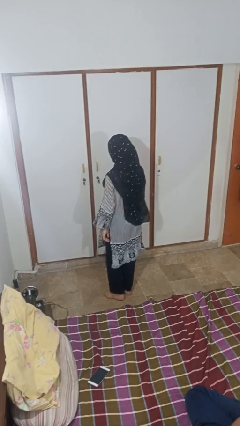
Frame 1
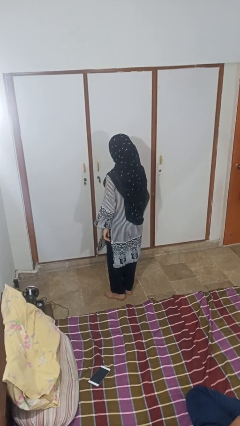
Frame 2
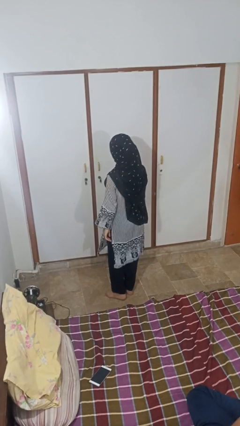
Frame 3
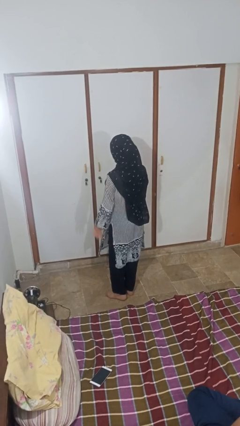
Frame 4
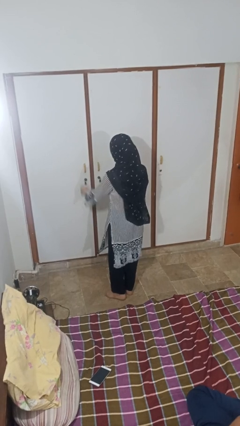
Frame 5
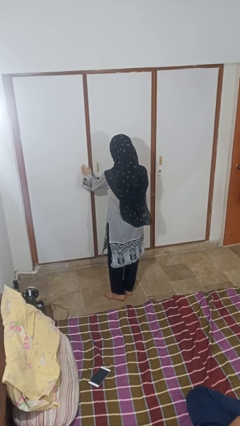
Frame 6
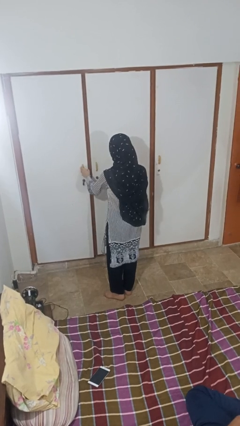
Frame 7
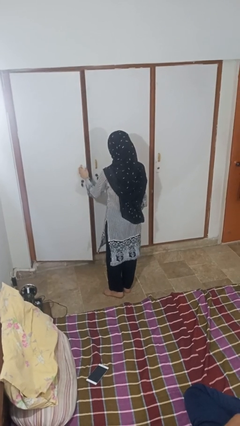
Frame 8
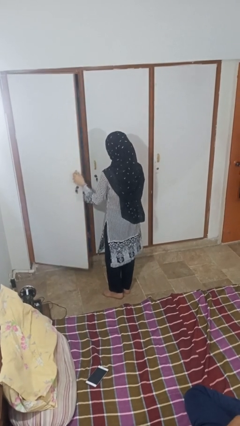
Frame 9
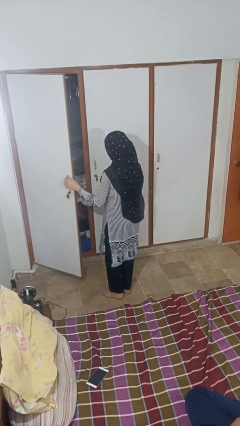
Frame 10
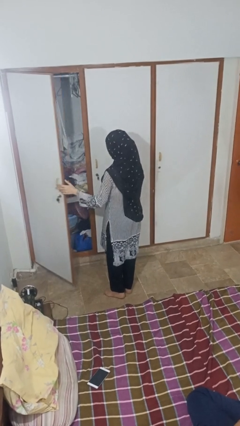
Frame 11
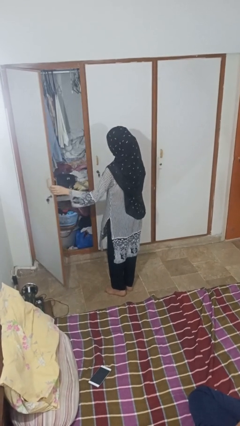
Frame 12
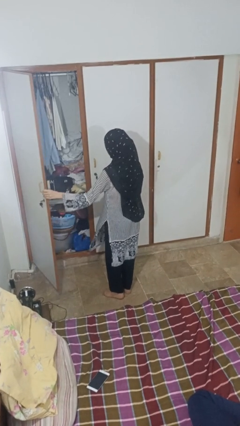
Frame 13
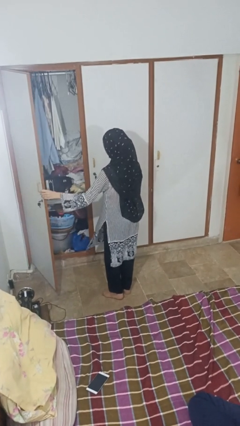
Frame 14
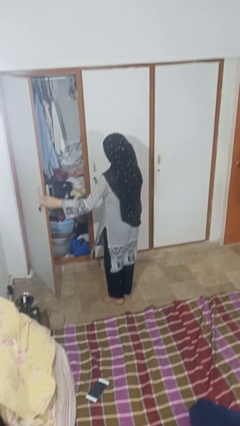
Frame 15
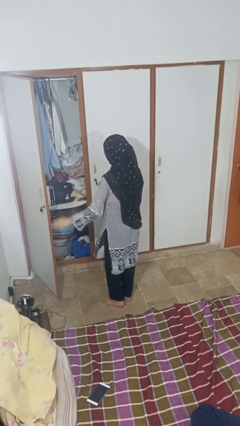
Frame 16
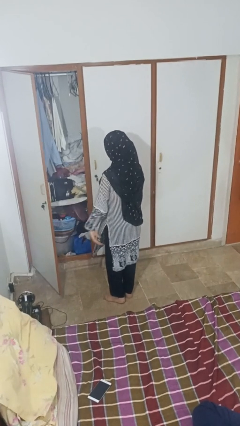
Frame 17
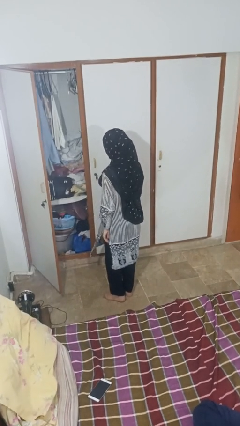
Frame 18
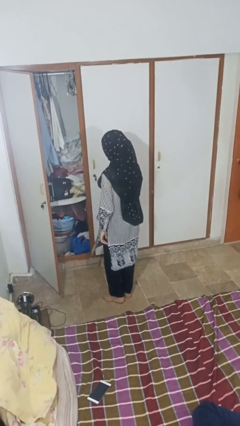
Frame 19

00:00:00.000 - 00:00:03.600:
person opens closet door

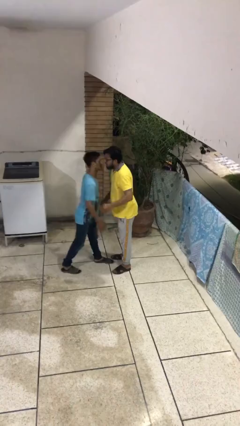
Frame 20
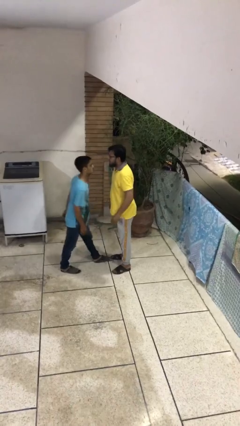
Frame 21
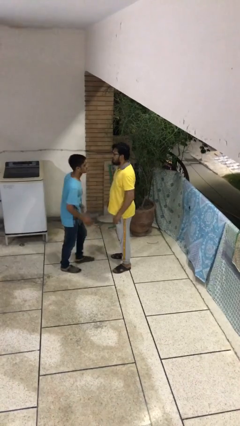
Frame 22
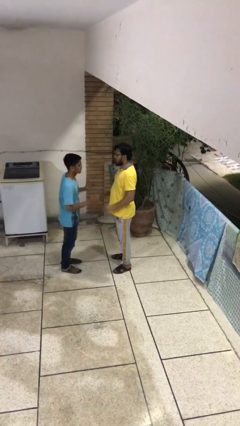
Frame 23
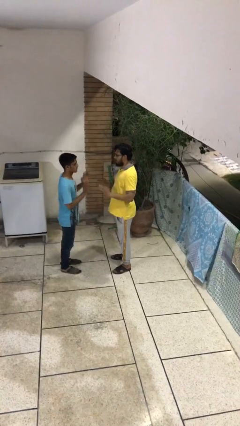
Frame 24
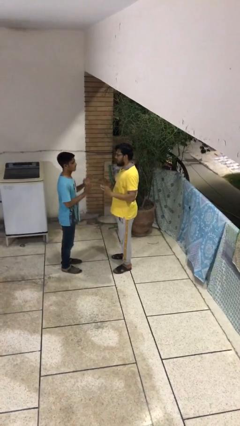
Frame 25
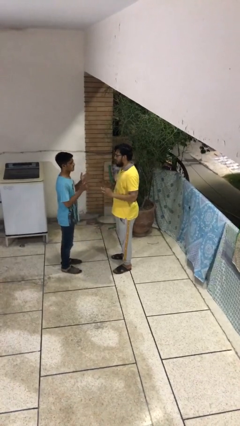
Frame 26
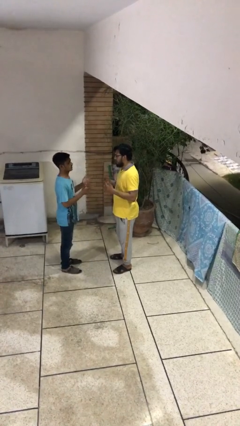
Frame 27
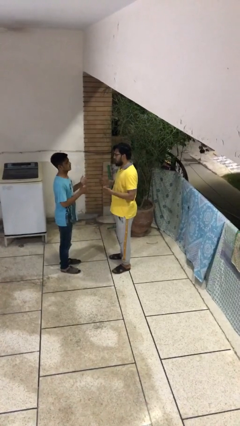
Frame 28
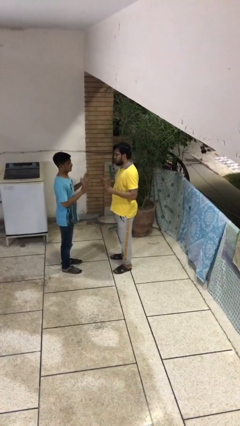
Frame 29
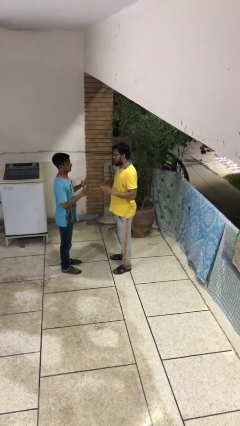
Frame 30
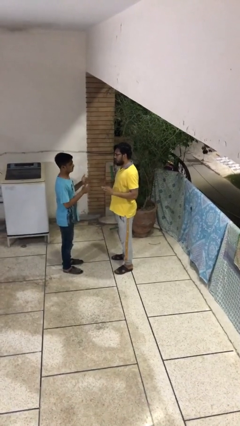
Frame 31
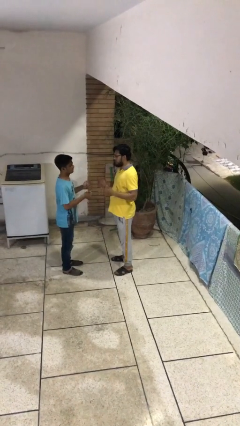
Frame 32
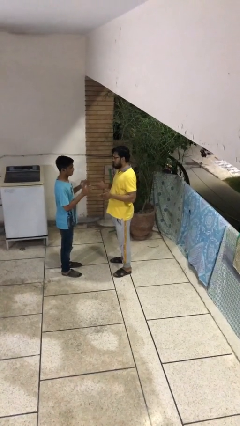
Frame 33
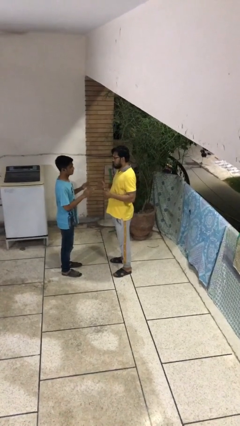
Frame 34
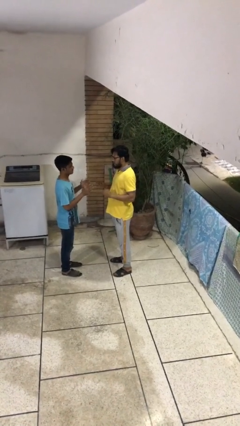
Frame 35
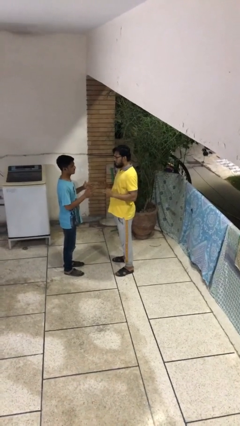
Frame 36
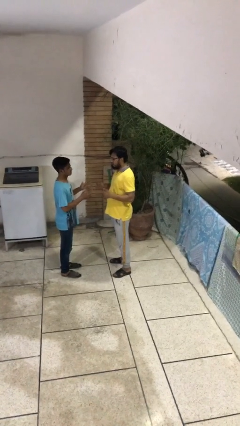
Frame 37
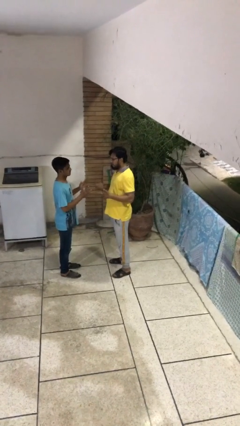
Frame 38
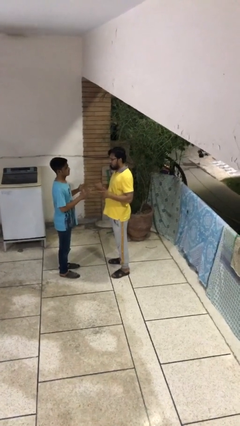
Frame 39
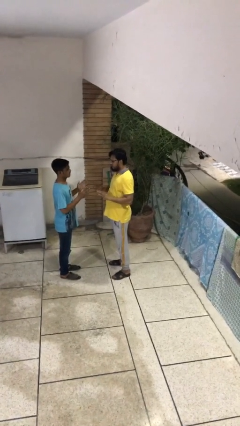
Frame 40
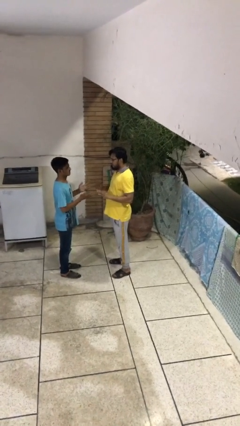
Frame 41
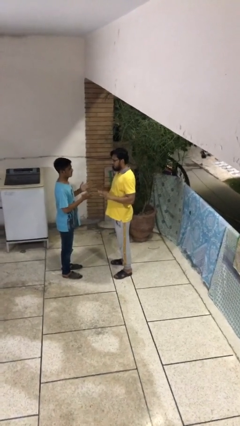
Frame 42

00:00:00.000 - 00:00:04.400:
person talks to person

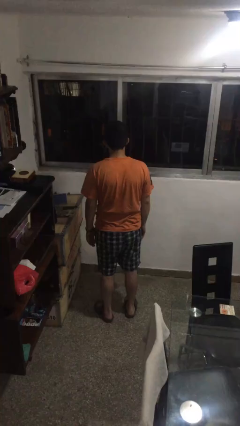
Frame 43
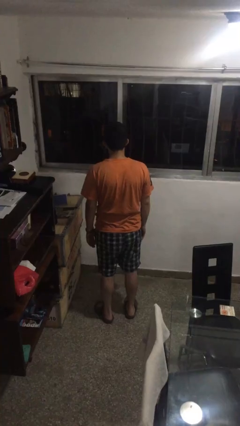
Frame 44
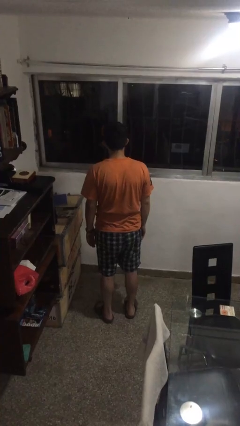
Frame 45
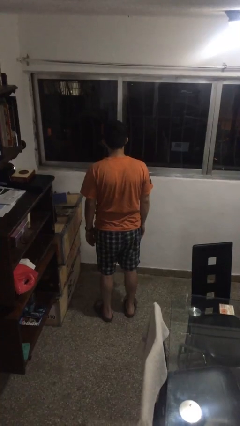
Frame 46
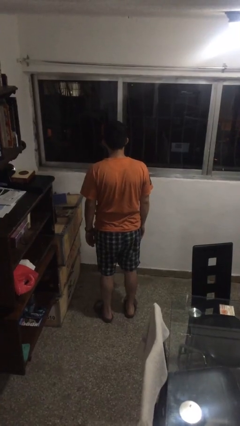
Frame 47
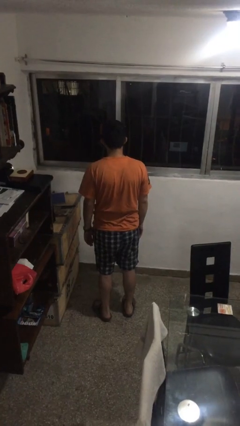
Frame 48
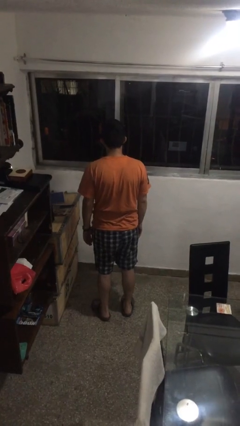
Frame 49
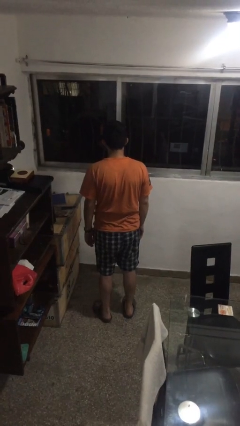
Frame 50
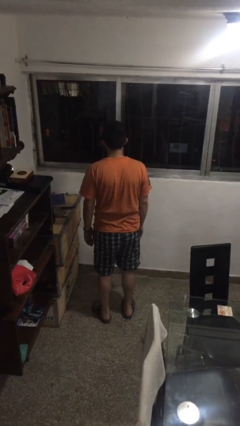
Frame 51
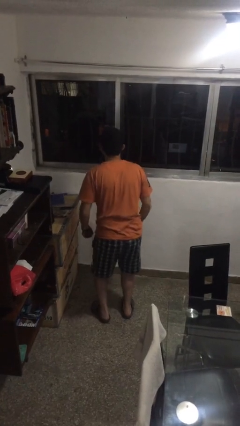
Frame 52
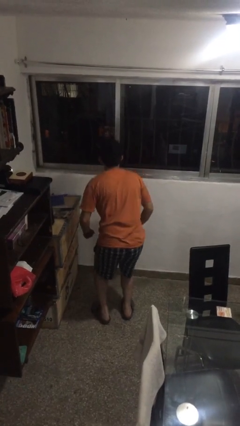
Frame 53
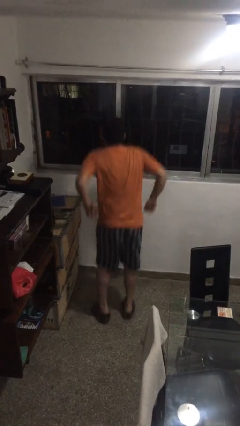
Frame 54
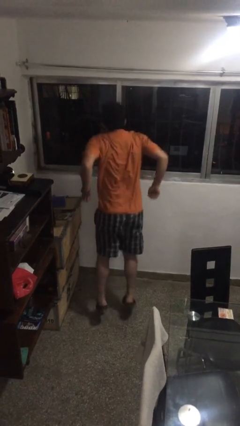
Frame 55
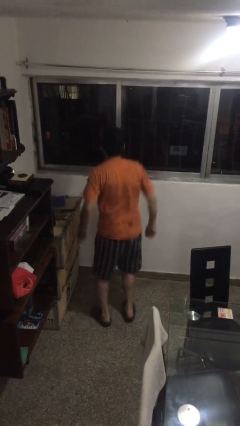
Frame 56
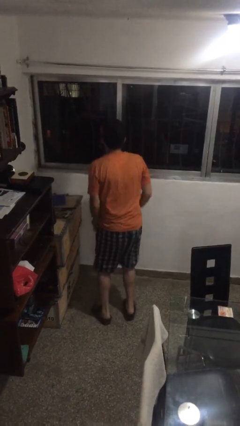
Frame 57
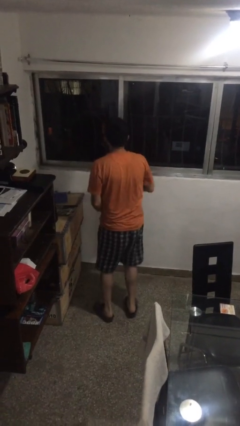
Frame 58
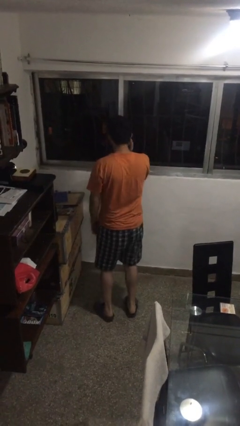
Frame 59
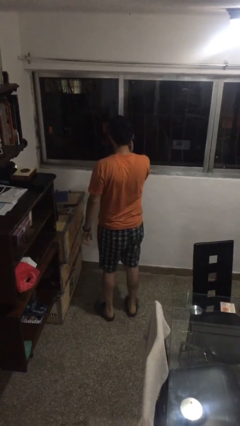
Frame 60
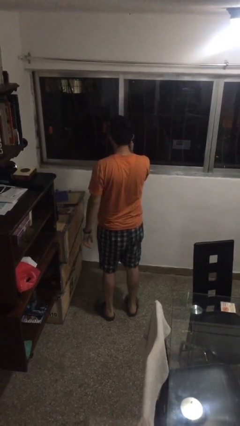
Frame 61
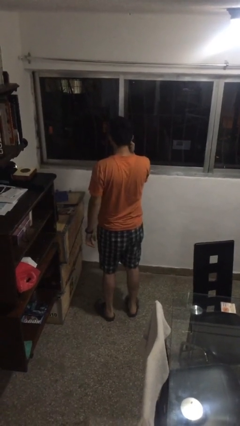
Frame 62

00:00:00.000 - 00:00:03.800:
person jumps

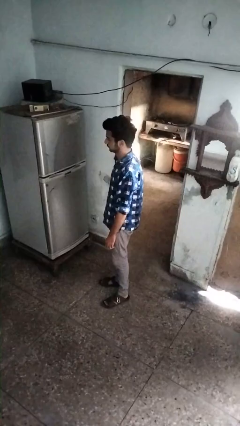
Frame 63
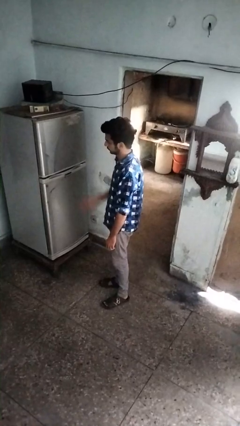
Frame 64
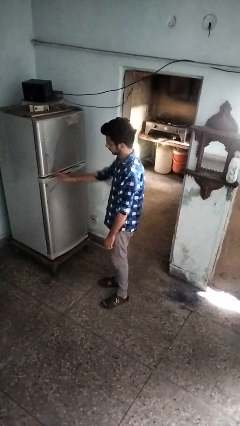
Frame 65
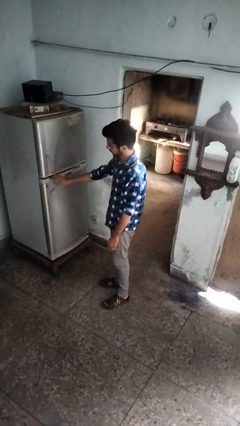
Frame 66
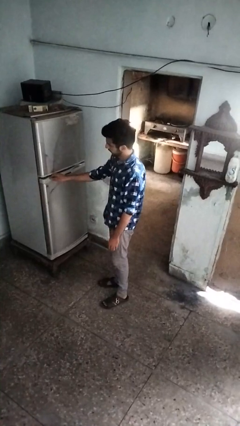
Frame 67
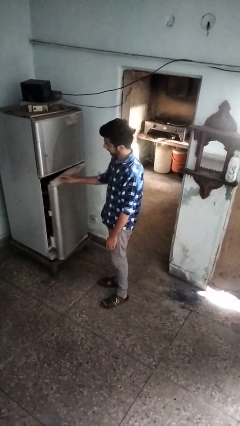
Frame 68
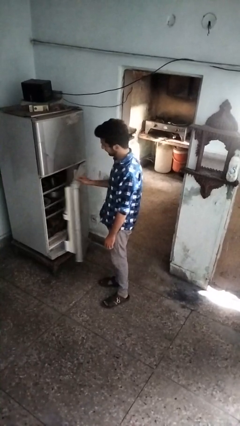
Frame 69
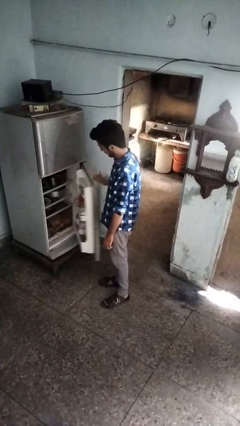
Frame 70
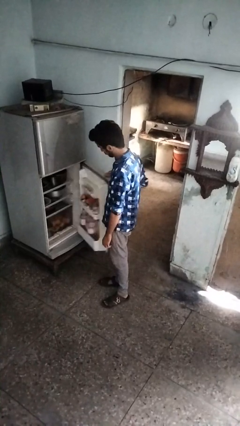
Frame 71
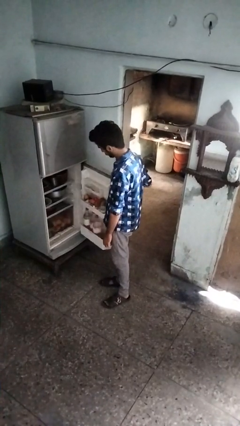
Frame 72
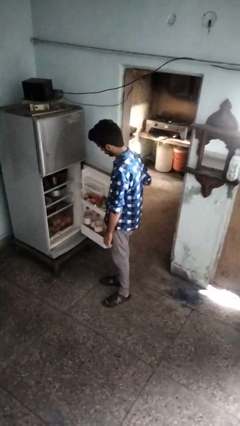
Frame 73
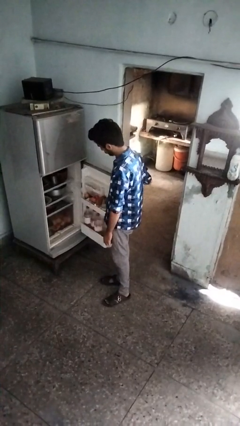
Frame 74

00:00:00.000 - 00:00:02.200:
person opens refrigerator

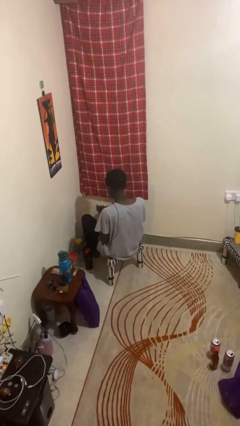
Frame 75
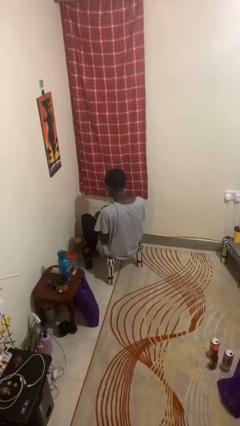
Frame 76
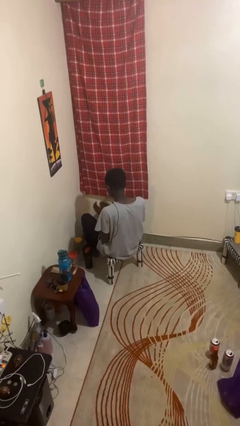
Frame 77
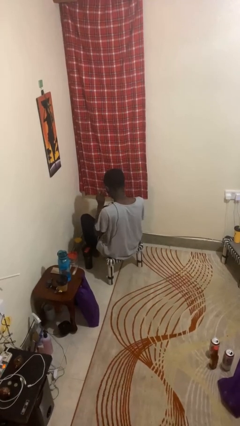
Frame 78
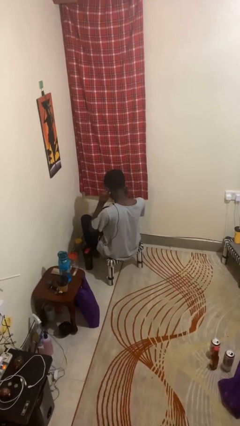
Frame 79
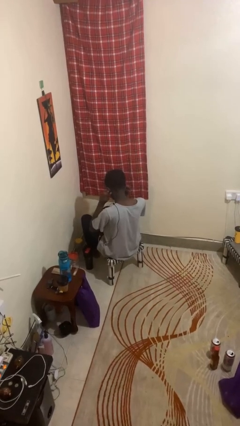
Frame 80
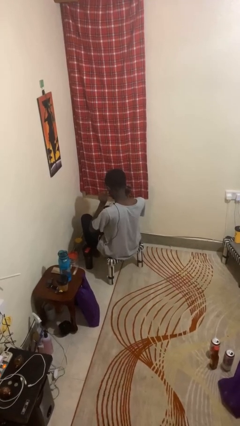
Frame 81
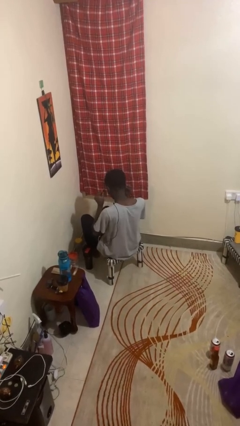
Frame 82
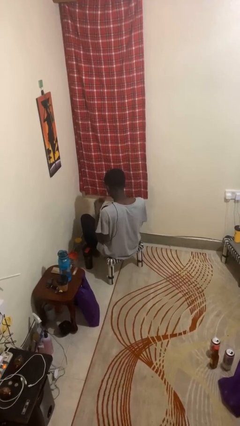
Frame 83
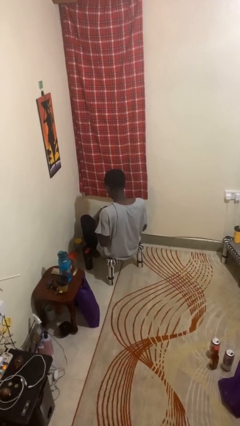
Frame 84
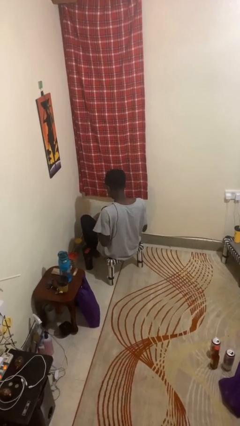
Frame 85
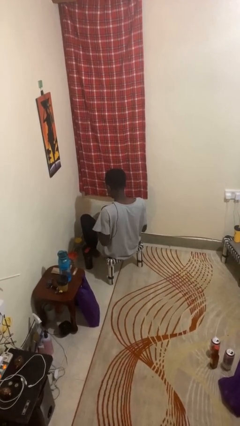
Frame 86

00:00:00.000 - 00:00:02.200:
person takes off headphones

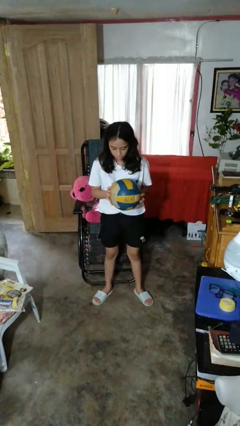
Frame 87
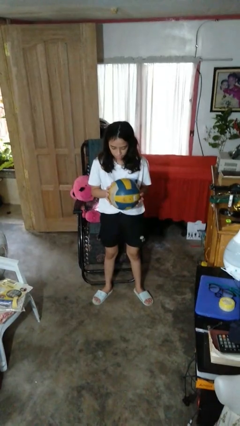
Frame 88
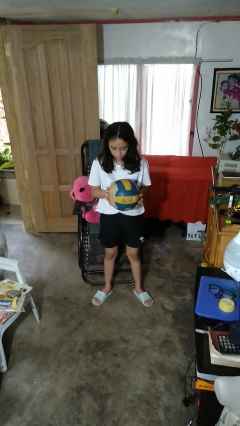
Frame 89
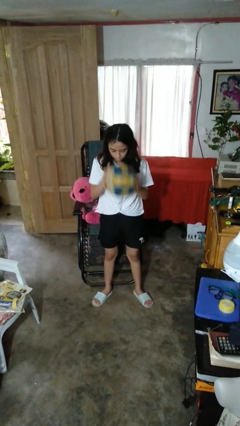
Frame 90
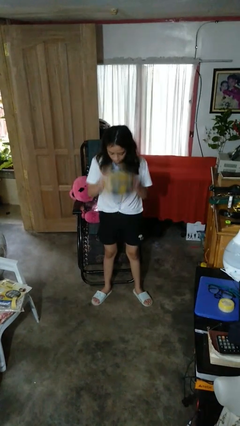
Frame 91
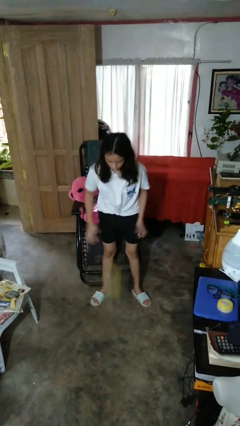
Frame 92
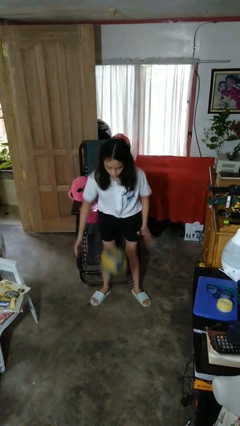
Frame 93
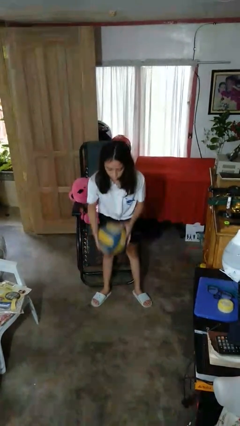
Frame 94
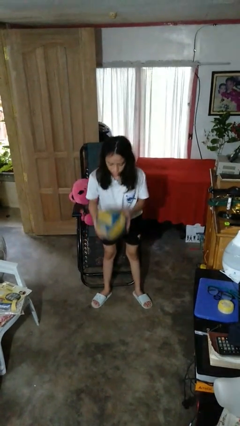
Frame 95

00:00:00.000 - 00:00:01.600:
person bounces ball on floor
